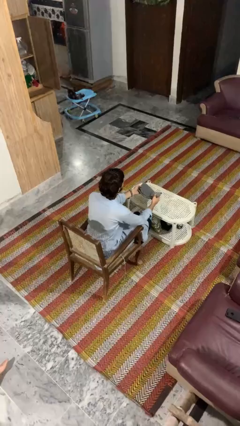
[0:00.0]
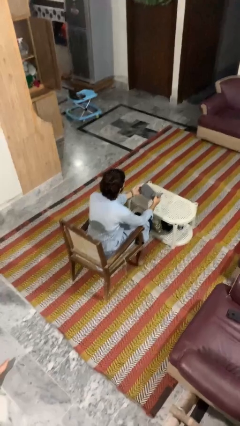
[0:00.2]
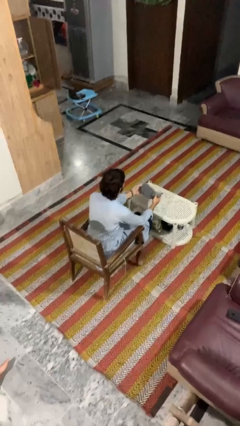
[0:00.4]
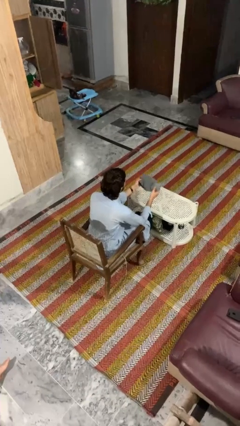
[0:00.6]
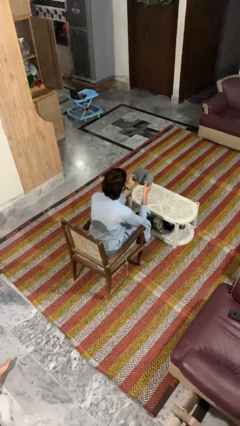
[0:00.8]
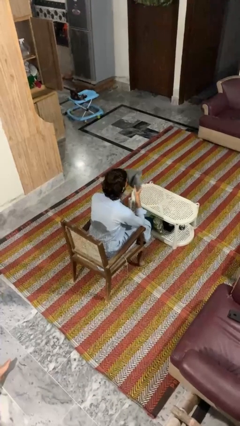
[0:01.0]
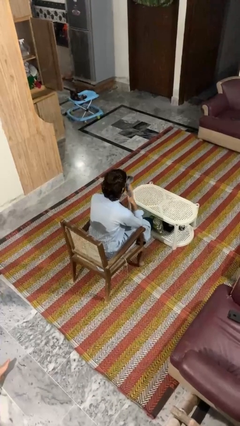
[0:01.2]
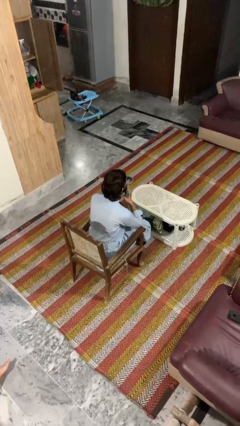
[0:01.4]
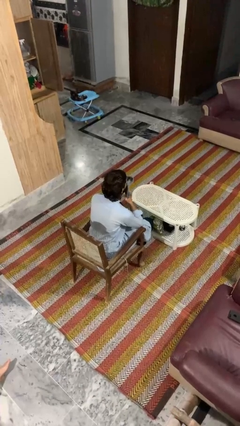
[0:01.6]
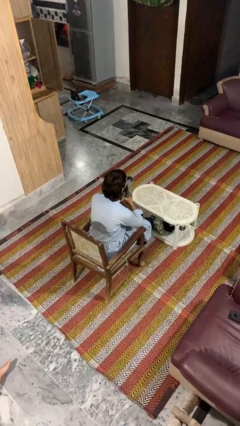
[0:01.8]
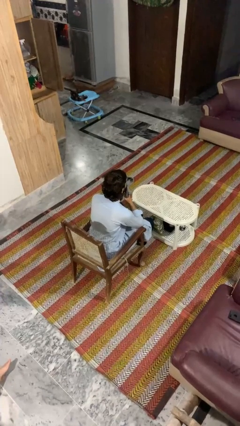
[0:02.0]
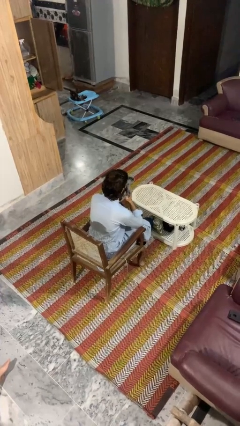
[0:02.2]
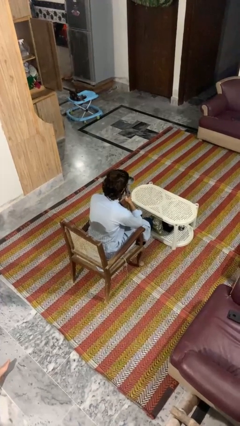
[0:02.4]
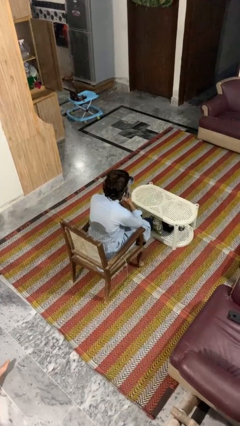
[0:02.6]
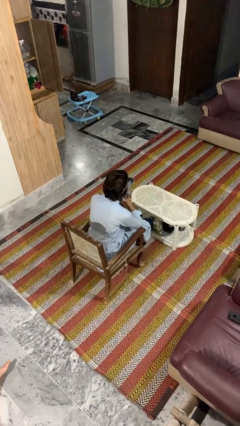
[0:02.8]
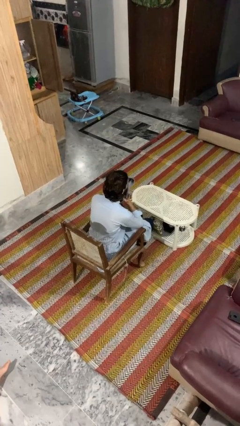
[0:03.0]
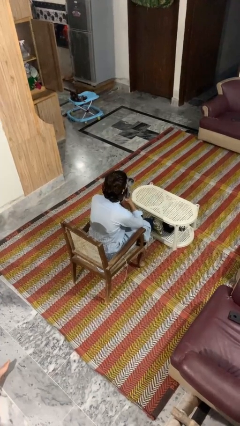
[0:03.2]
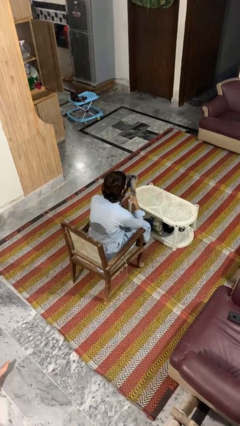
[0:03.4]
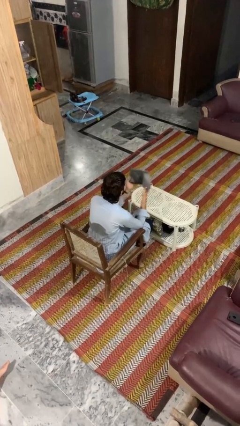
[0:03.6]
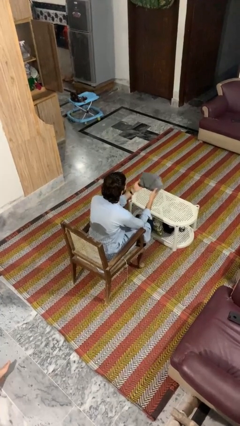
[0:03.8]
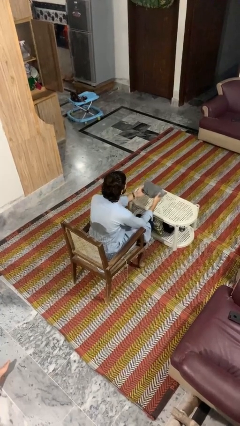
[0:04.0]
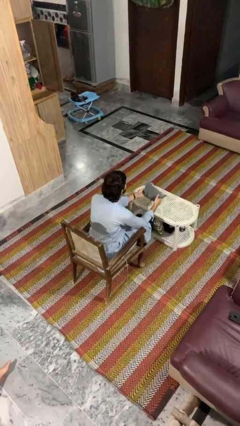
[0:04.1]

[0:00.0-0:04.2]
person wipes mouth with napkin

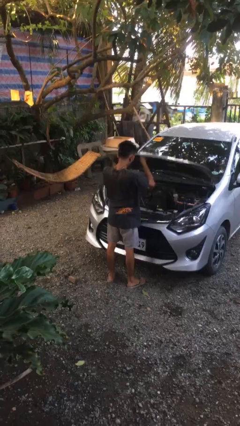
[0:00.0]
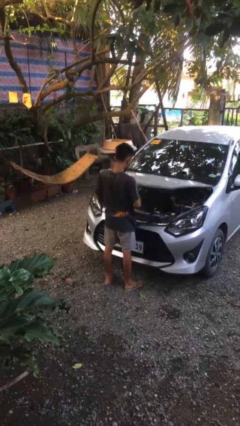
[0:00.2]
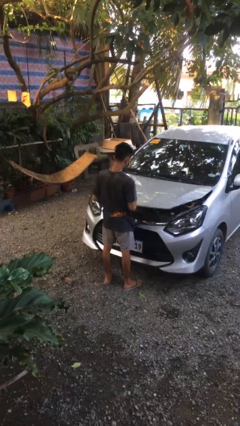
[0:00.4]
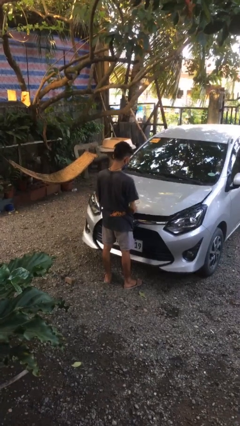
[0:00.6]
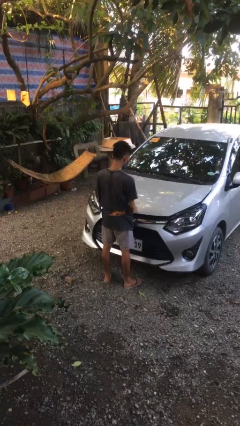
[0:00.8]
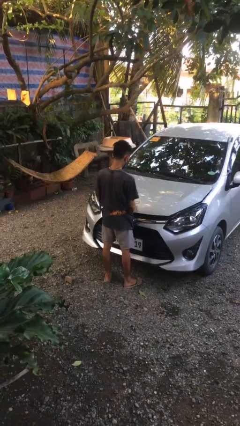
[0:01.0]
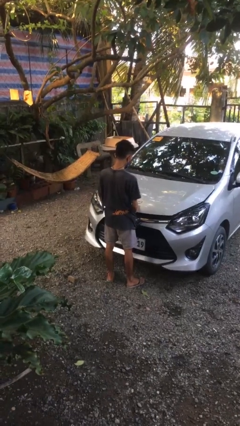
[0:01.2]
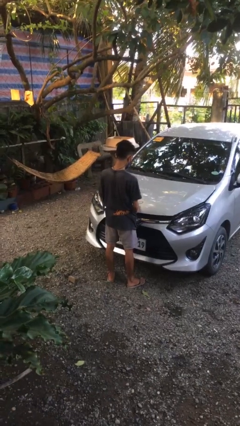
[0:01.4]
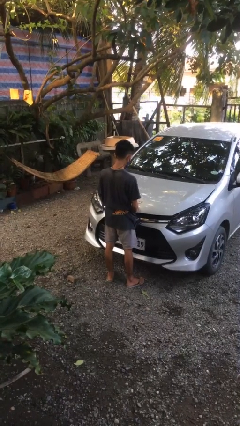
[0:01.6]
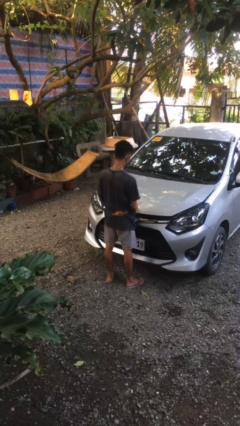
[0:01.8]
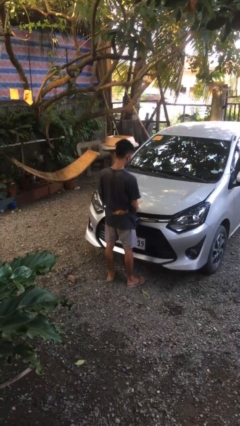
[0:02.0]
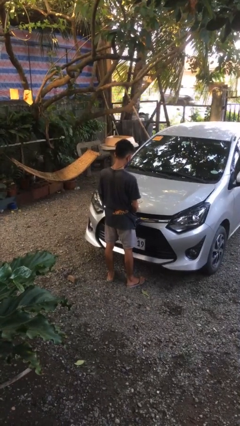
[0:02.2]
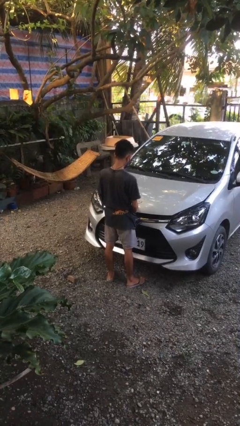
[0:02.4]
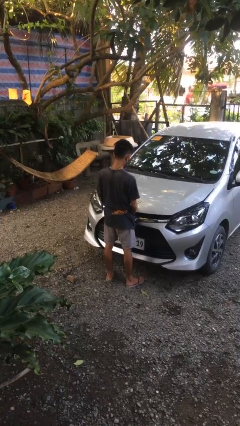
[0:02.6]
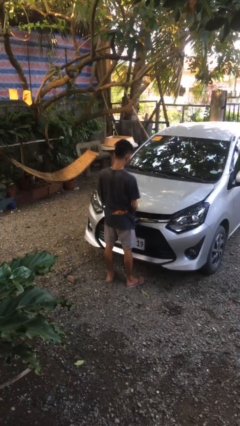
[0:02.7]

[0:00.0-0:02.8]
person closes car hood

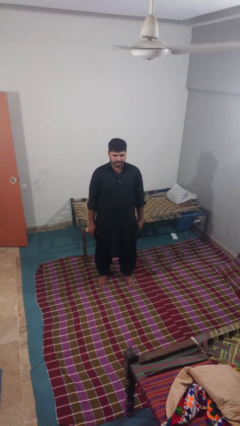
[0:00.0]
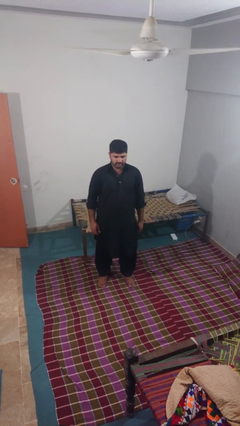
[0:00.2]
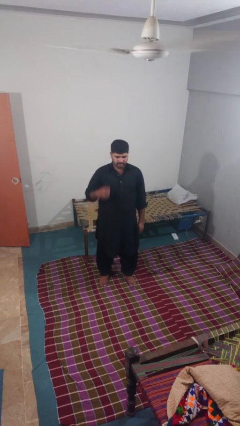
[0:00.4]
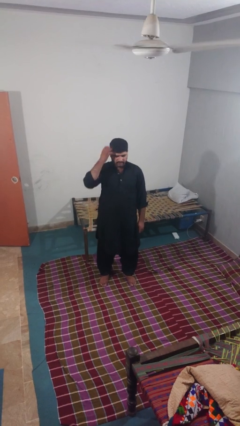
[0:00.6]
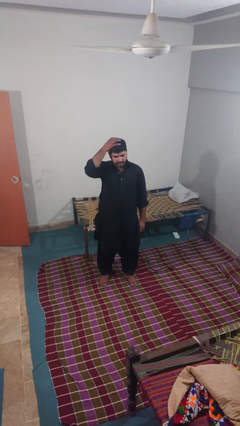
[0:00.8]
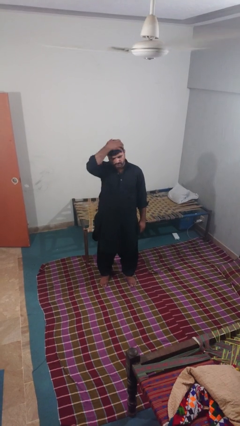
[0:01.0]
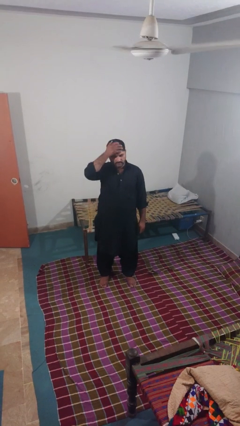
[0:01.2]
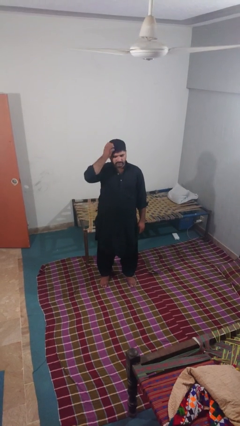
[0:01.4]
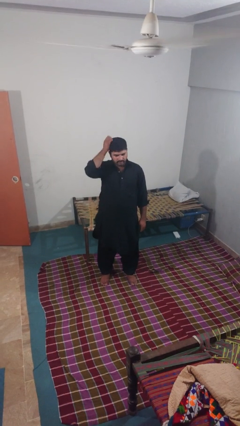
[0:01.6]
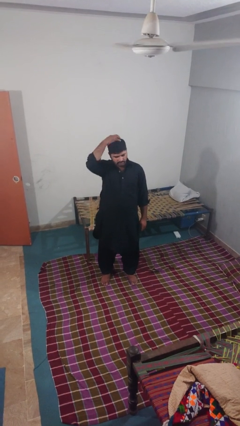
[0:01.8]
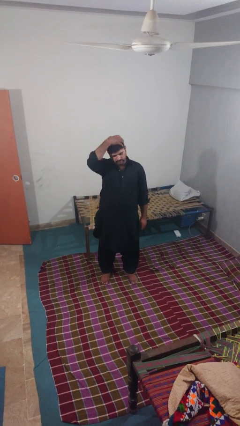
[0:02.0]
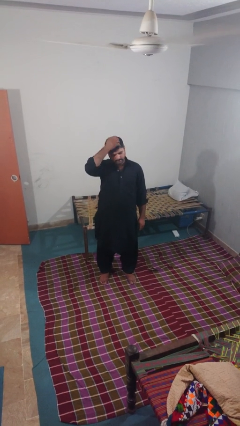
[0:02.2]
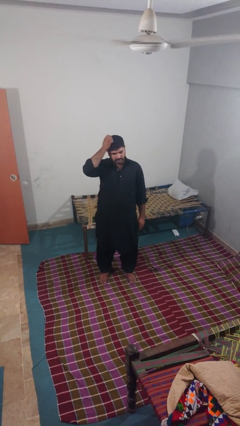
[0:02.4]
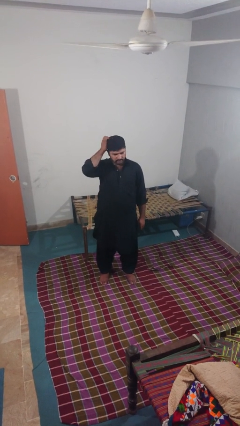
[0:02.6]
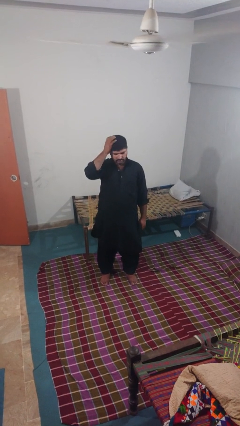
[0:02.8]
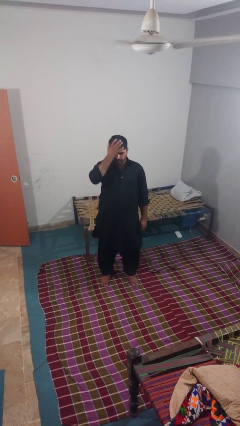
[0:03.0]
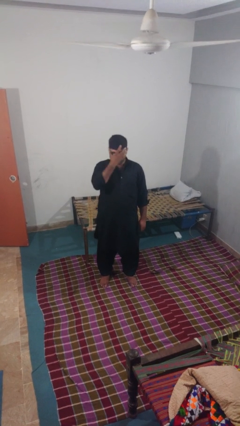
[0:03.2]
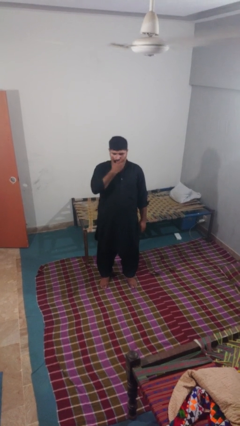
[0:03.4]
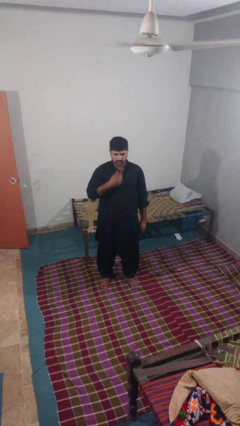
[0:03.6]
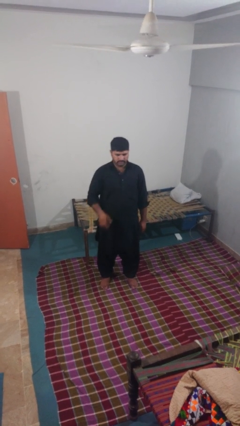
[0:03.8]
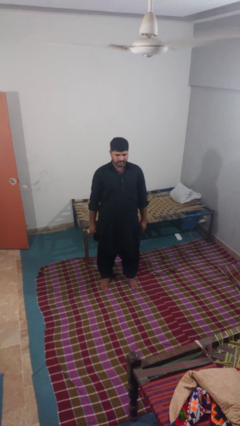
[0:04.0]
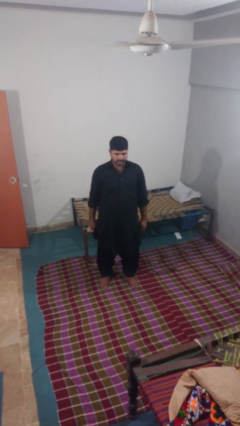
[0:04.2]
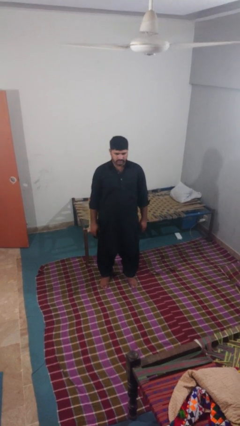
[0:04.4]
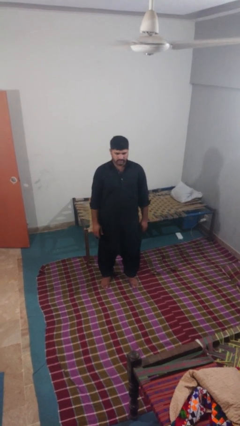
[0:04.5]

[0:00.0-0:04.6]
person scratches face

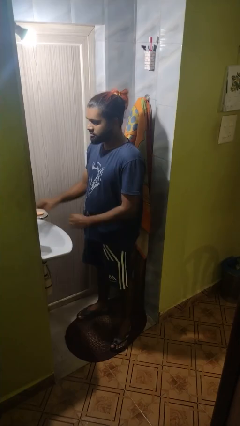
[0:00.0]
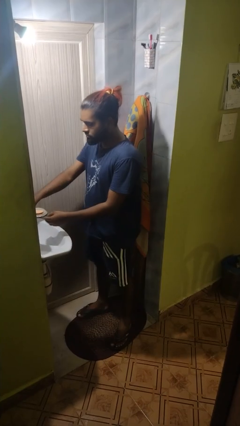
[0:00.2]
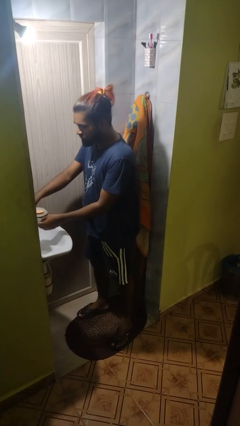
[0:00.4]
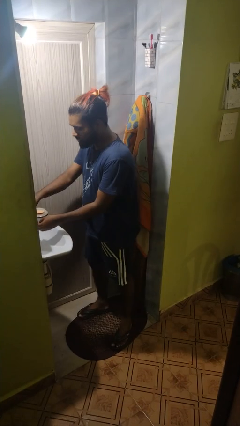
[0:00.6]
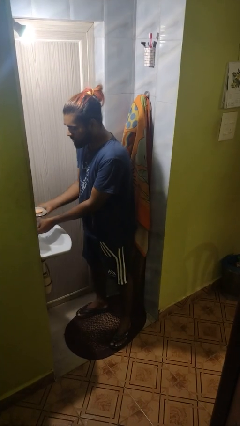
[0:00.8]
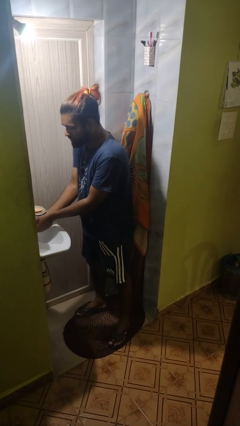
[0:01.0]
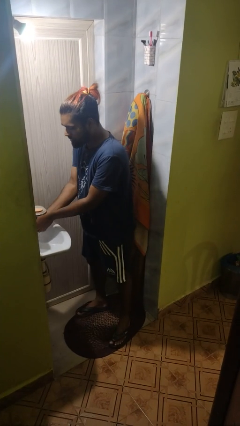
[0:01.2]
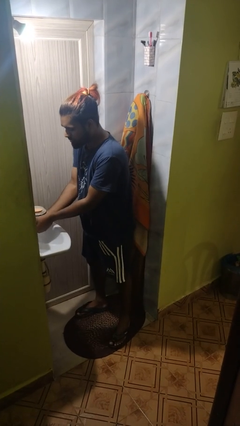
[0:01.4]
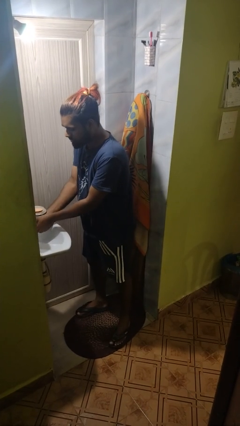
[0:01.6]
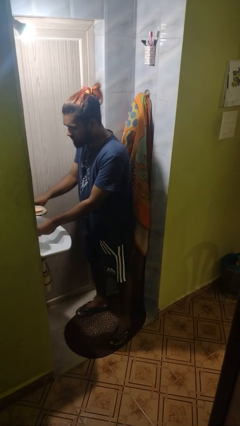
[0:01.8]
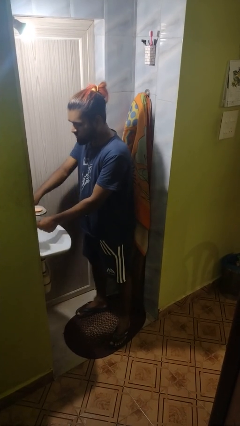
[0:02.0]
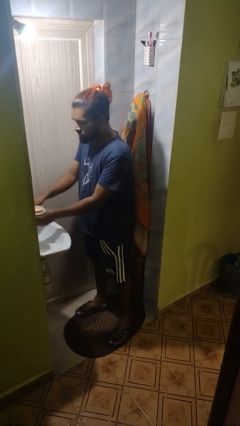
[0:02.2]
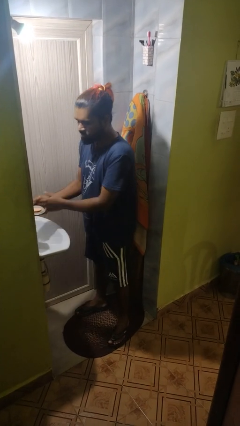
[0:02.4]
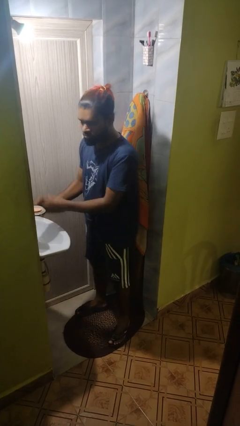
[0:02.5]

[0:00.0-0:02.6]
person washes hands

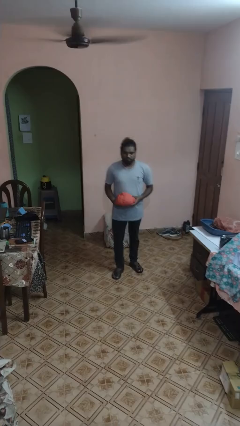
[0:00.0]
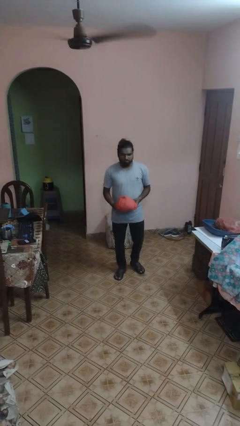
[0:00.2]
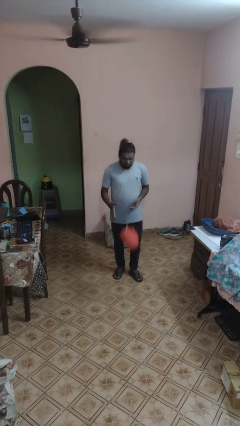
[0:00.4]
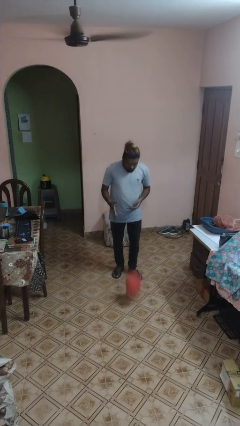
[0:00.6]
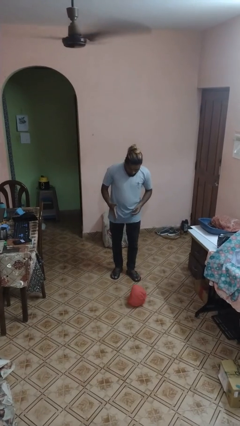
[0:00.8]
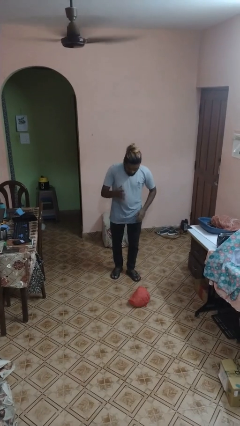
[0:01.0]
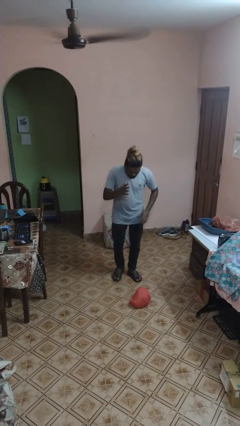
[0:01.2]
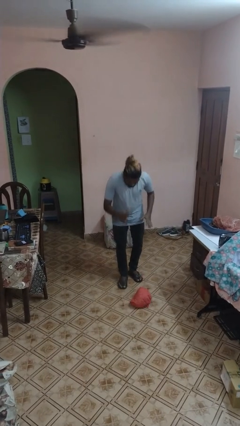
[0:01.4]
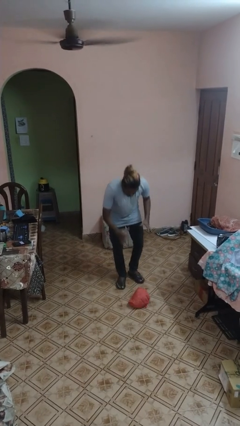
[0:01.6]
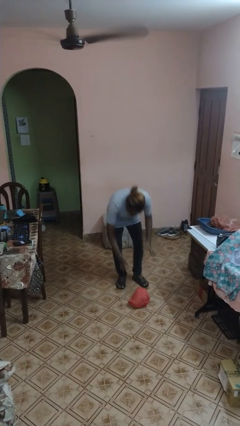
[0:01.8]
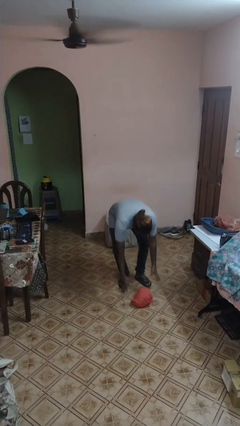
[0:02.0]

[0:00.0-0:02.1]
person drops object

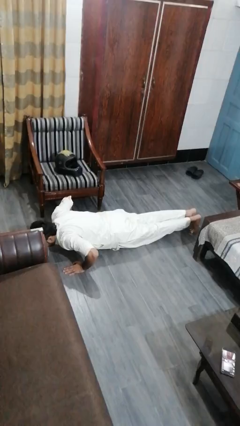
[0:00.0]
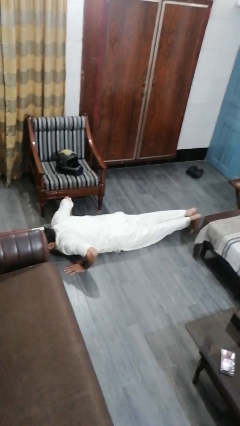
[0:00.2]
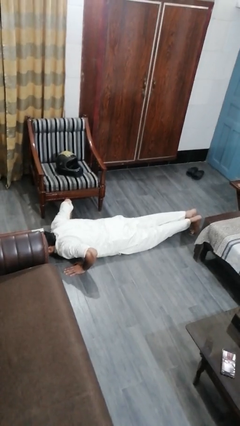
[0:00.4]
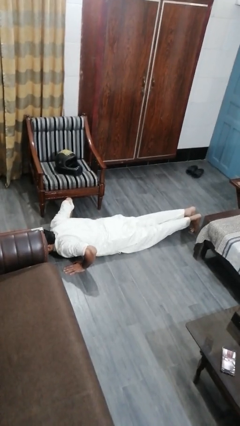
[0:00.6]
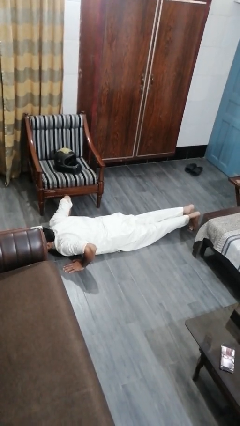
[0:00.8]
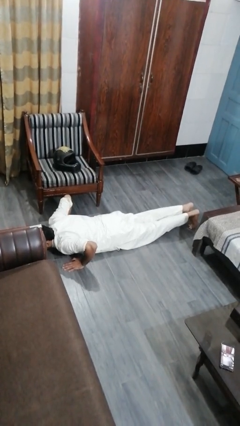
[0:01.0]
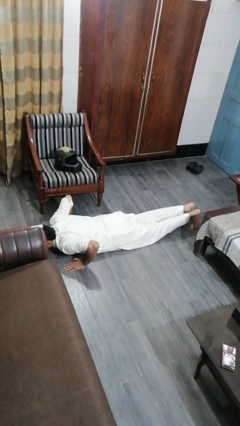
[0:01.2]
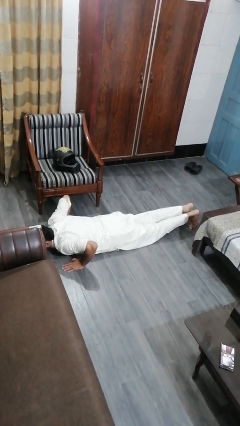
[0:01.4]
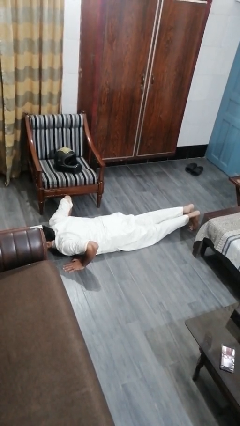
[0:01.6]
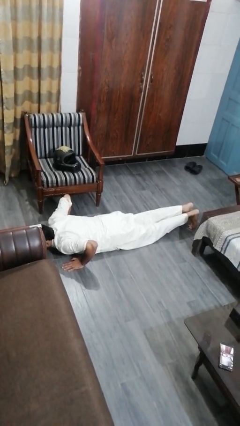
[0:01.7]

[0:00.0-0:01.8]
person exercises with pushup
